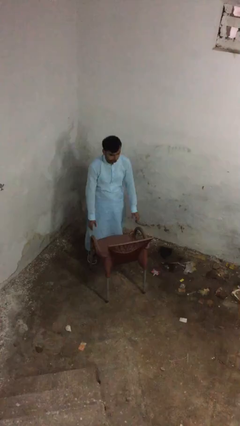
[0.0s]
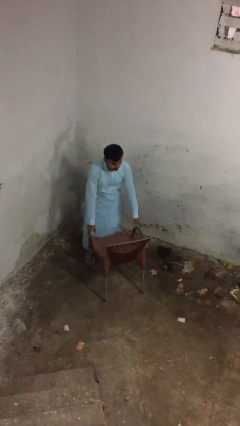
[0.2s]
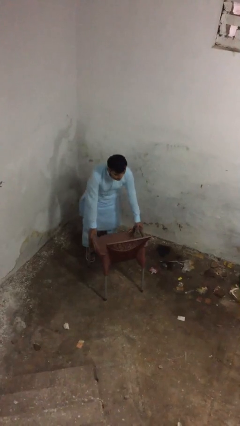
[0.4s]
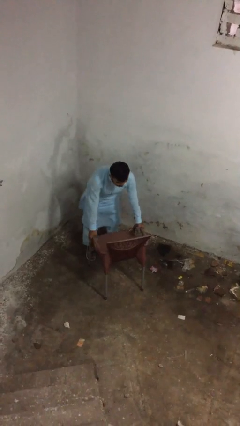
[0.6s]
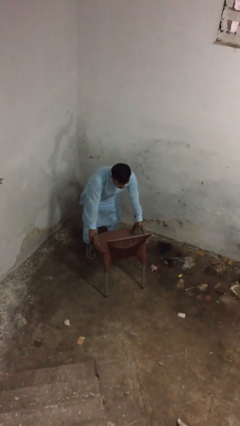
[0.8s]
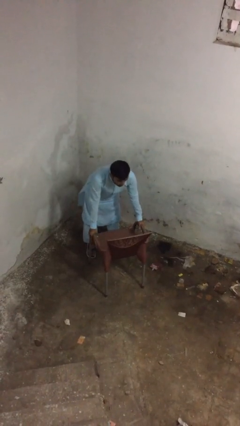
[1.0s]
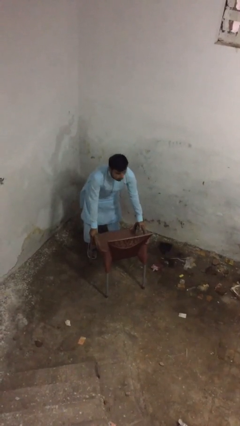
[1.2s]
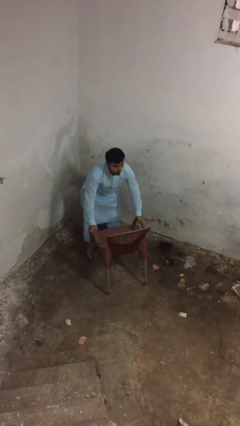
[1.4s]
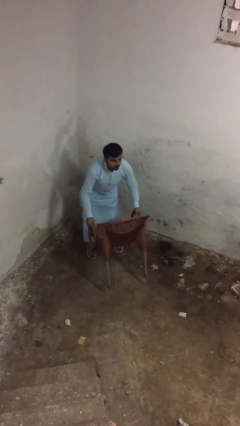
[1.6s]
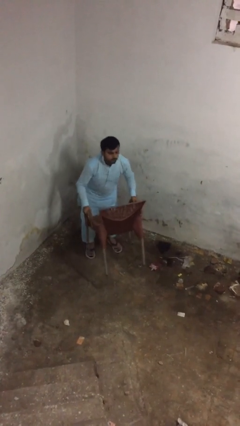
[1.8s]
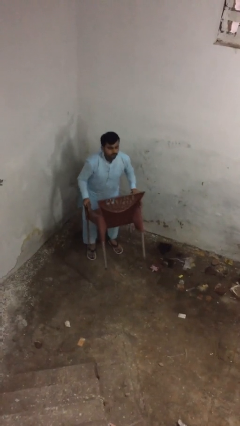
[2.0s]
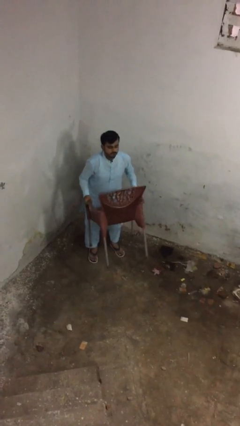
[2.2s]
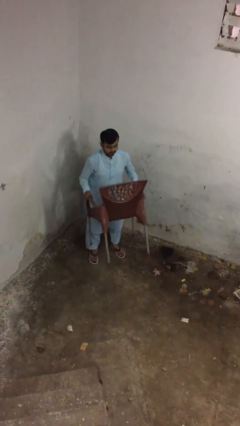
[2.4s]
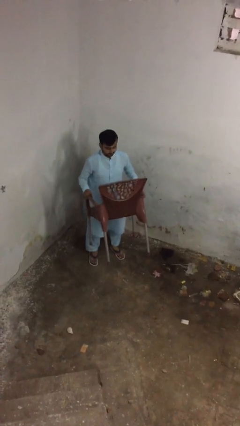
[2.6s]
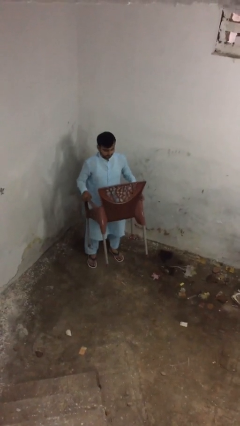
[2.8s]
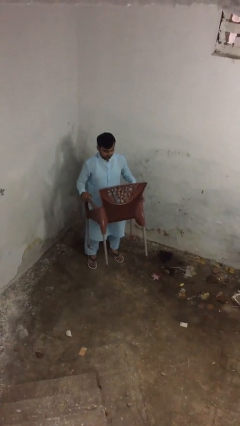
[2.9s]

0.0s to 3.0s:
person picks up object from floor

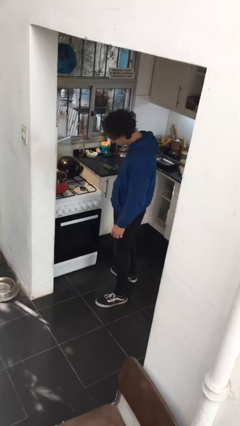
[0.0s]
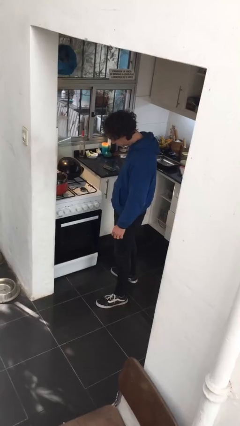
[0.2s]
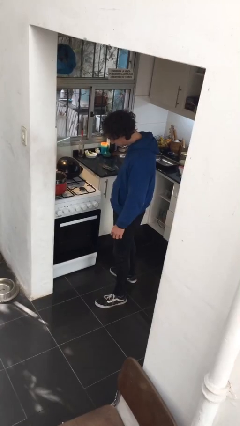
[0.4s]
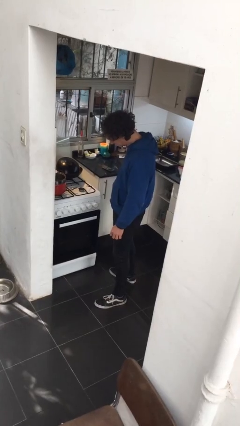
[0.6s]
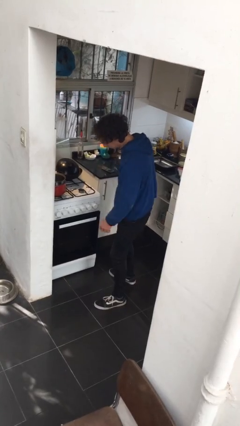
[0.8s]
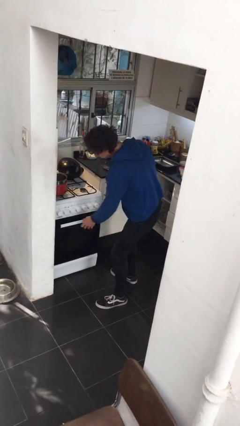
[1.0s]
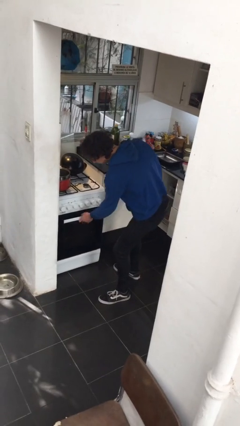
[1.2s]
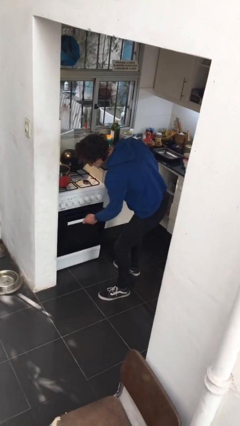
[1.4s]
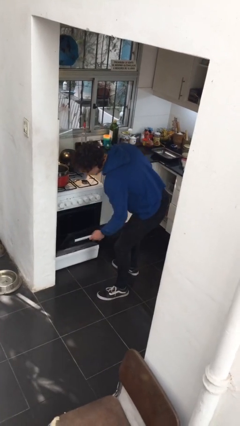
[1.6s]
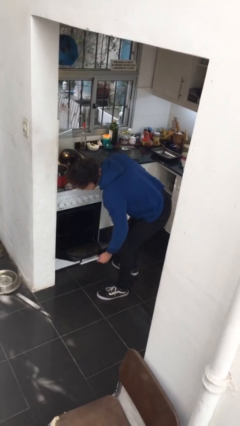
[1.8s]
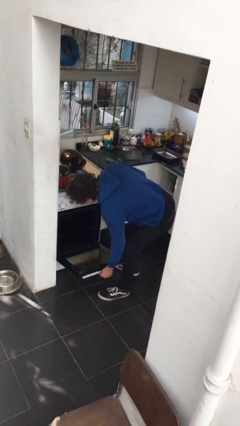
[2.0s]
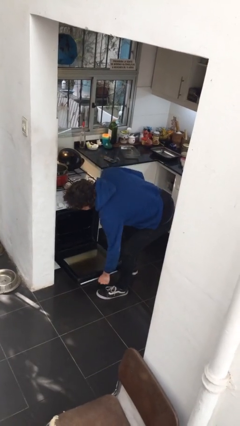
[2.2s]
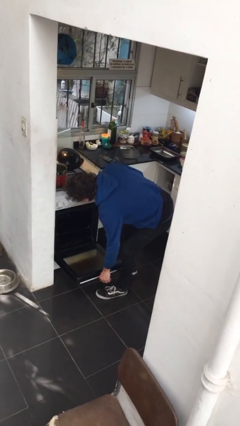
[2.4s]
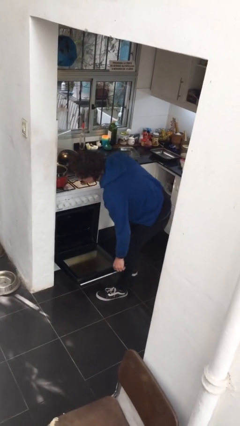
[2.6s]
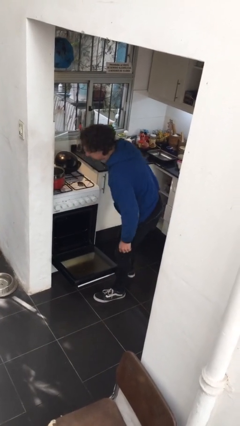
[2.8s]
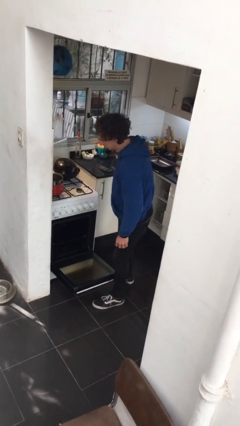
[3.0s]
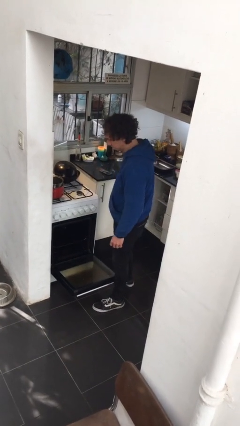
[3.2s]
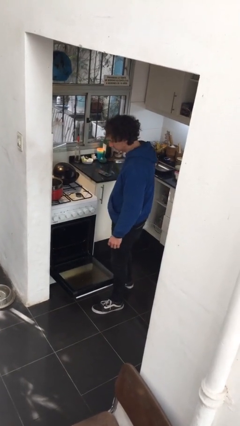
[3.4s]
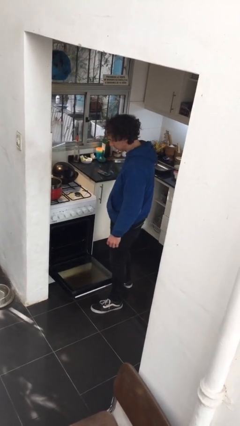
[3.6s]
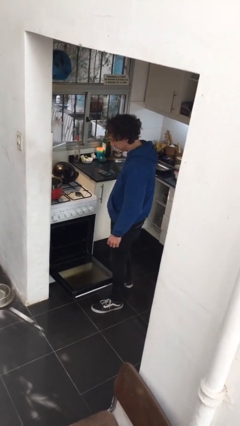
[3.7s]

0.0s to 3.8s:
person opens oven door

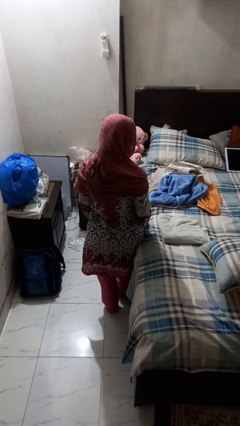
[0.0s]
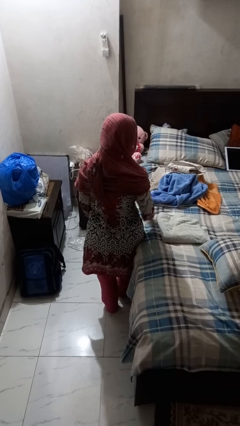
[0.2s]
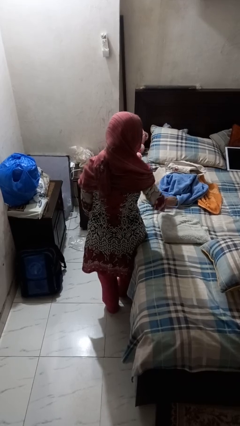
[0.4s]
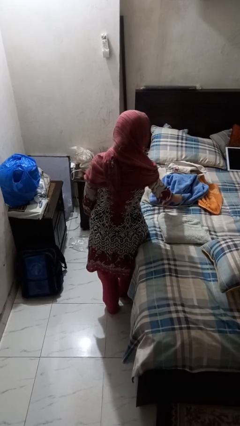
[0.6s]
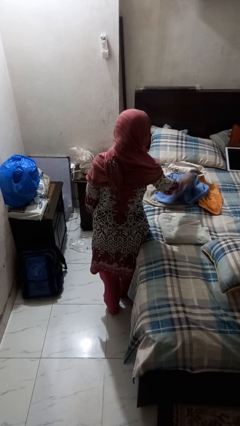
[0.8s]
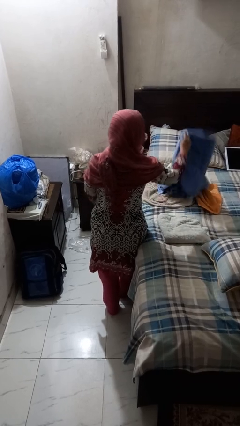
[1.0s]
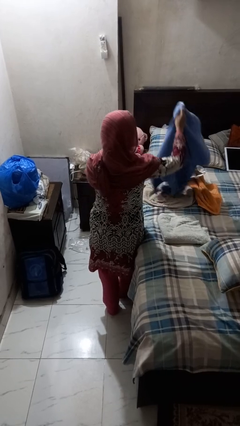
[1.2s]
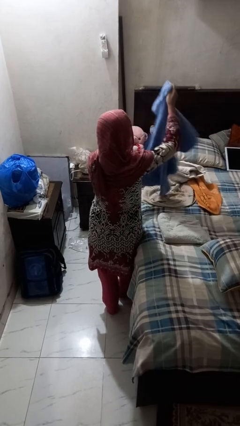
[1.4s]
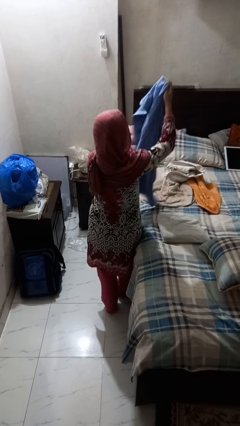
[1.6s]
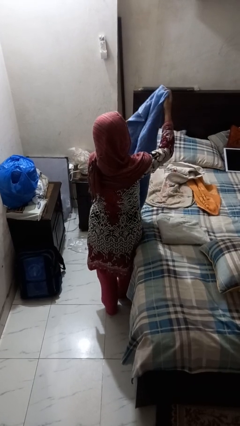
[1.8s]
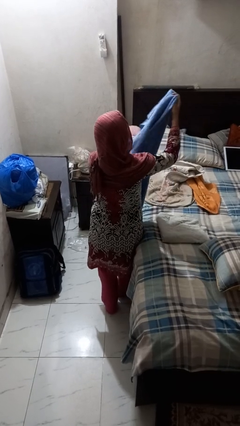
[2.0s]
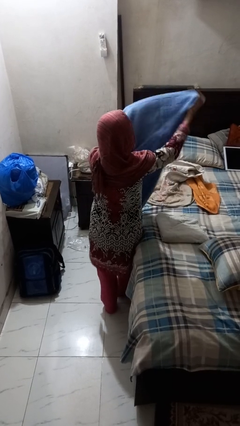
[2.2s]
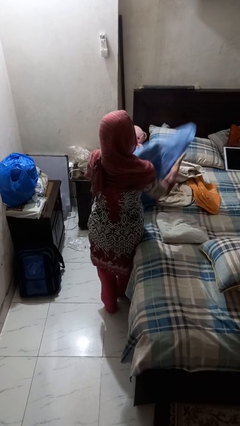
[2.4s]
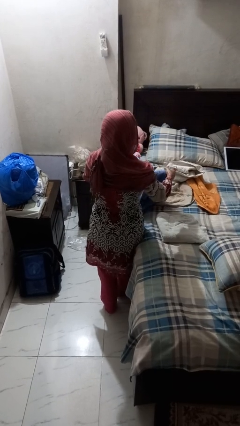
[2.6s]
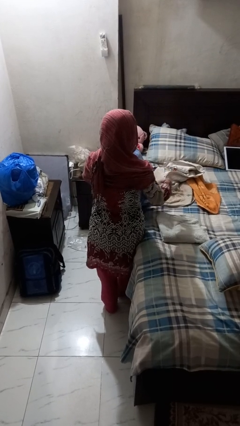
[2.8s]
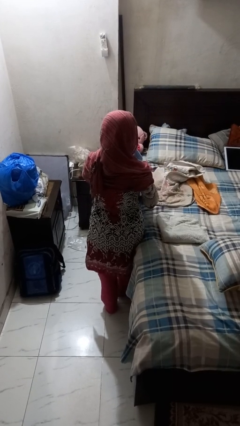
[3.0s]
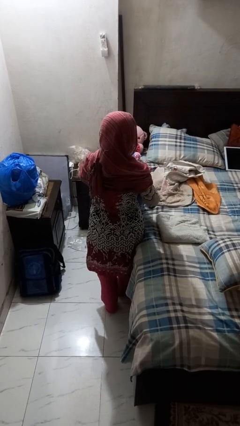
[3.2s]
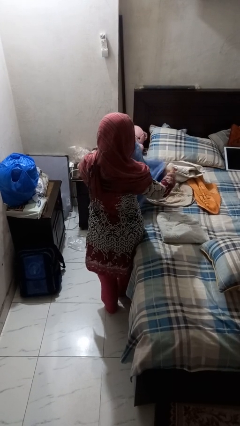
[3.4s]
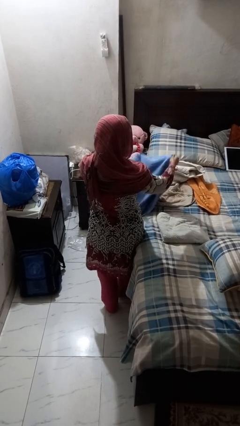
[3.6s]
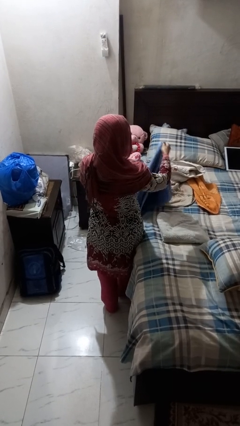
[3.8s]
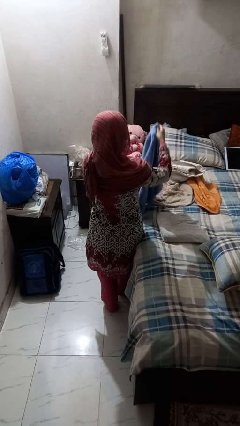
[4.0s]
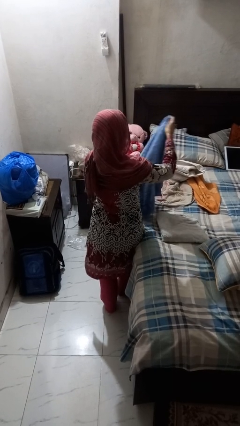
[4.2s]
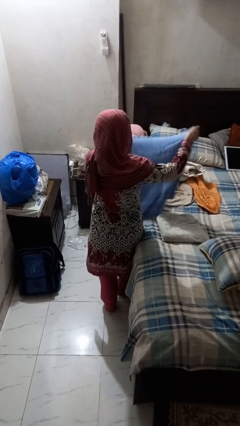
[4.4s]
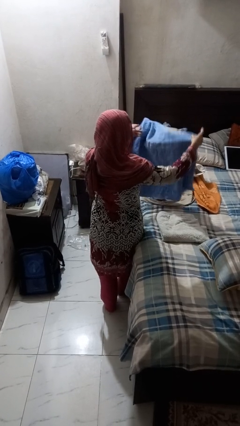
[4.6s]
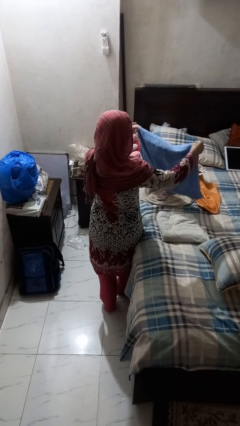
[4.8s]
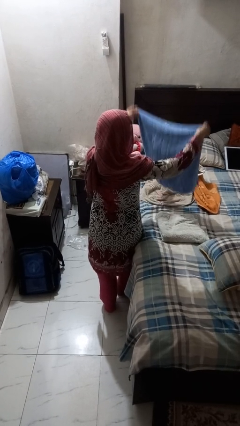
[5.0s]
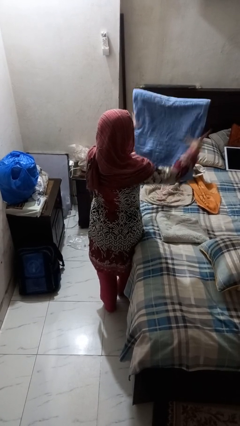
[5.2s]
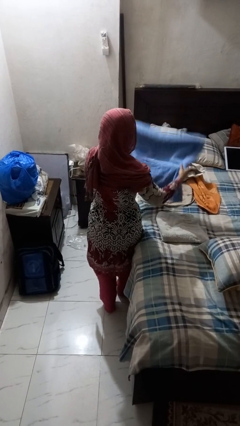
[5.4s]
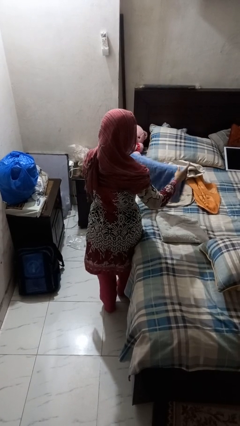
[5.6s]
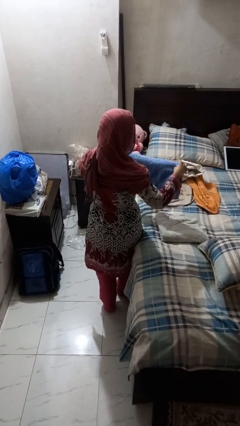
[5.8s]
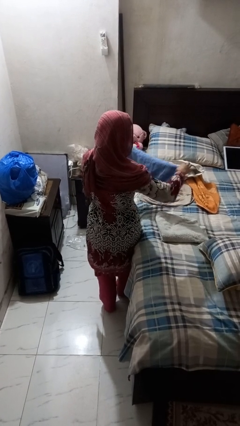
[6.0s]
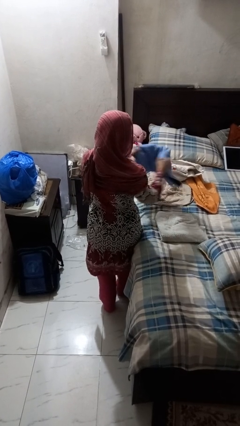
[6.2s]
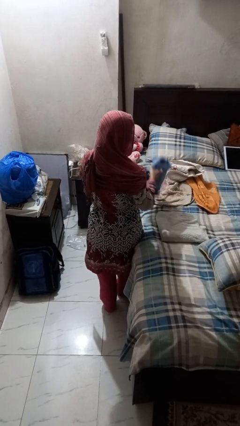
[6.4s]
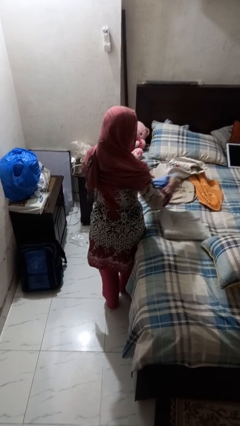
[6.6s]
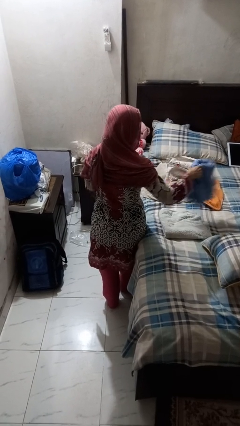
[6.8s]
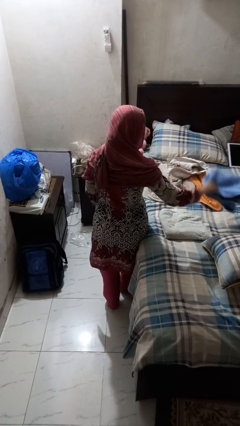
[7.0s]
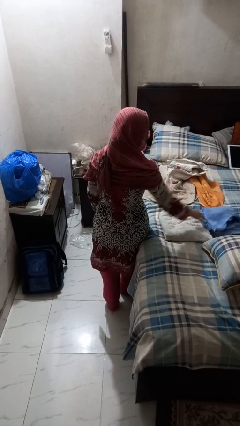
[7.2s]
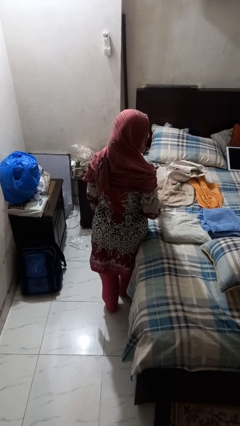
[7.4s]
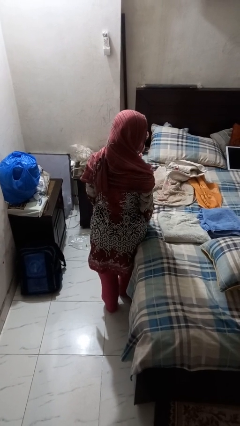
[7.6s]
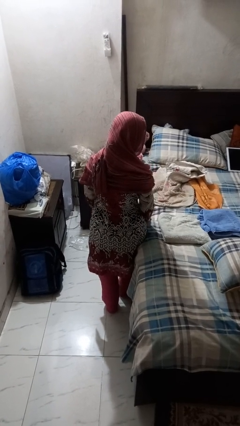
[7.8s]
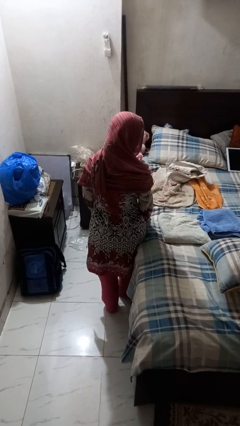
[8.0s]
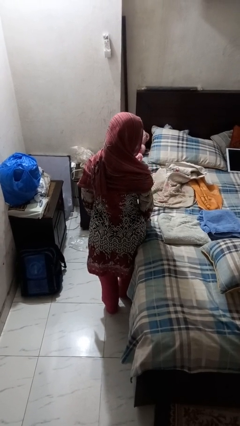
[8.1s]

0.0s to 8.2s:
person folds towel

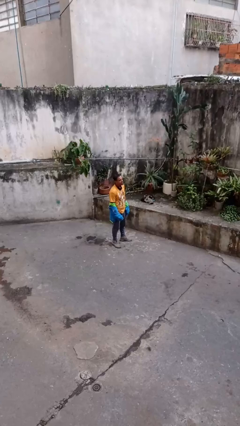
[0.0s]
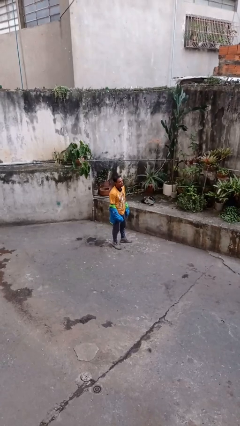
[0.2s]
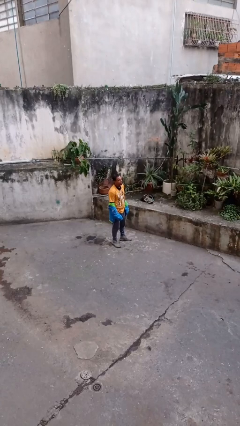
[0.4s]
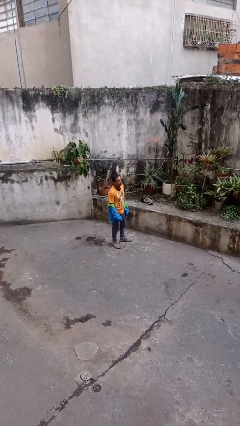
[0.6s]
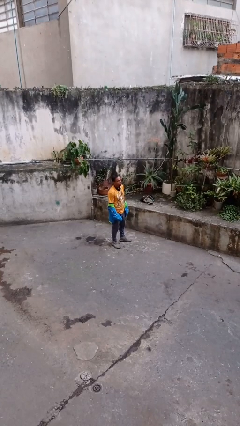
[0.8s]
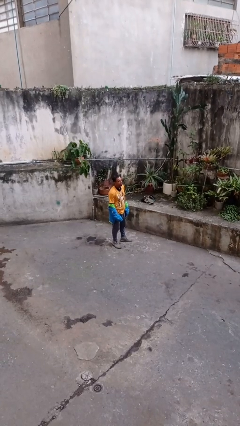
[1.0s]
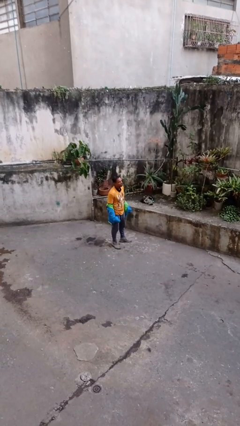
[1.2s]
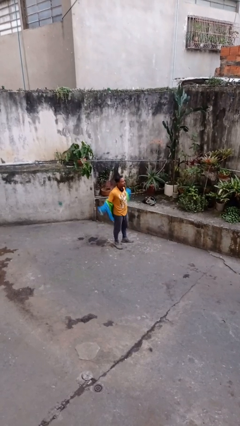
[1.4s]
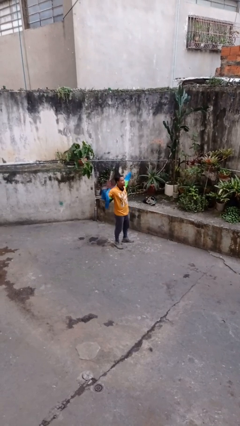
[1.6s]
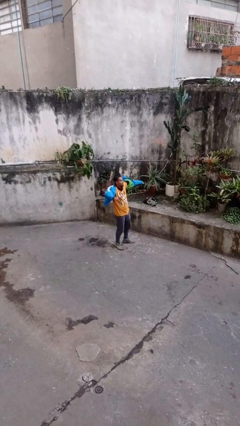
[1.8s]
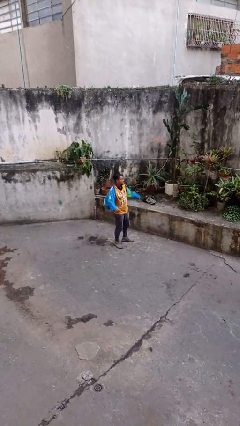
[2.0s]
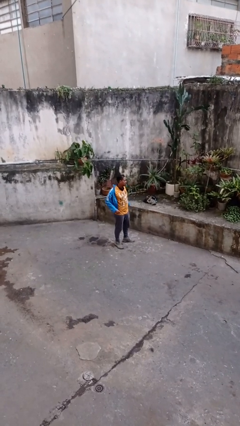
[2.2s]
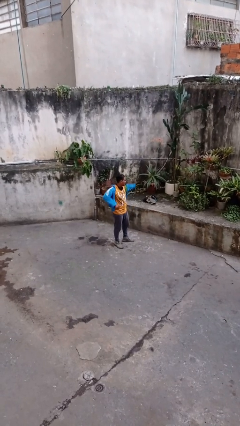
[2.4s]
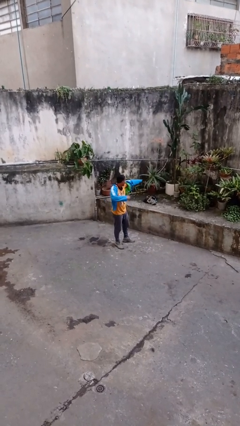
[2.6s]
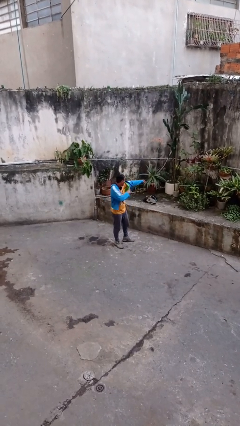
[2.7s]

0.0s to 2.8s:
person puts on jacket
